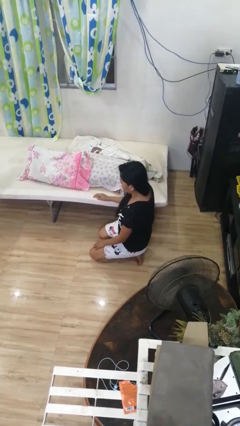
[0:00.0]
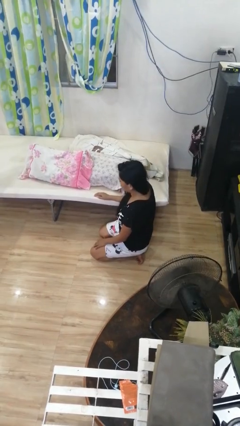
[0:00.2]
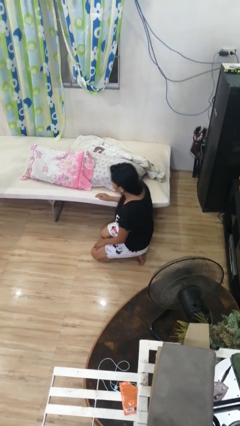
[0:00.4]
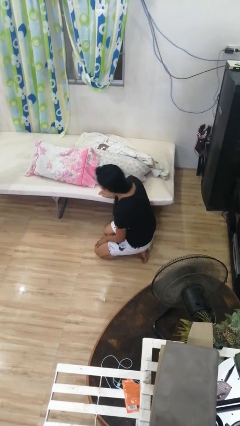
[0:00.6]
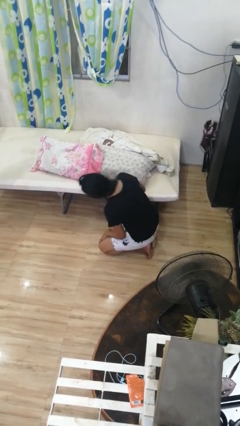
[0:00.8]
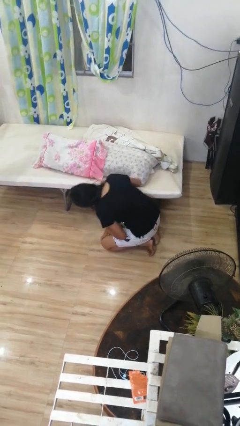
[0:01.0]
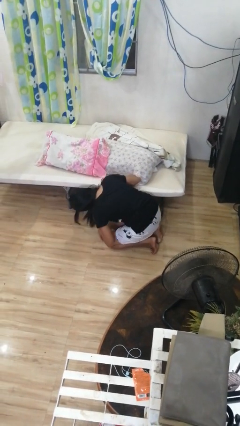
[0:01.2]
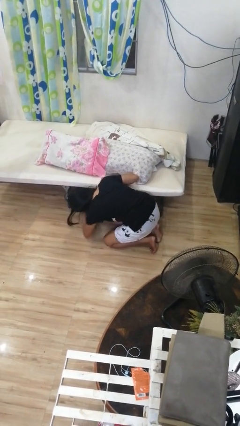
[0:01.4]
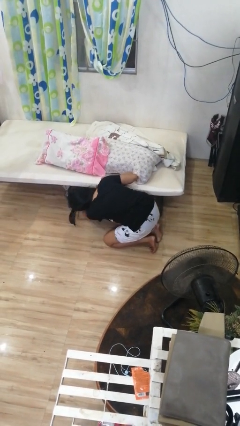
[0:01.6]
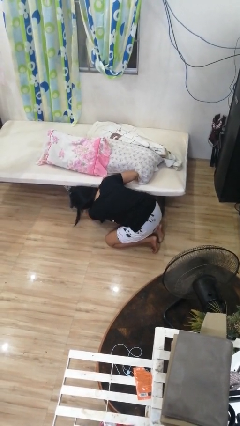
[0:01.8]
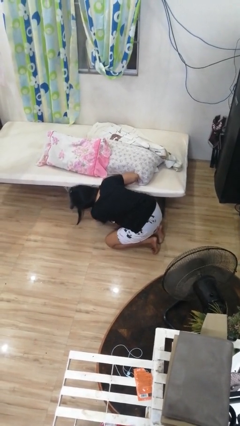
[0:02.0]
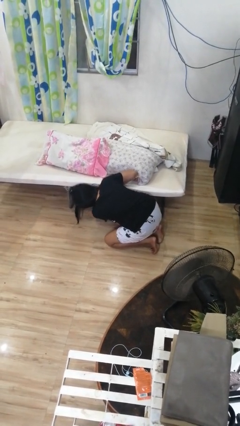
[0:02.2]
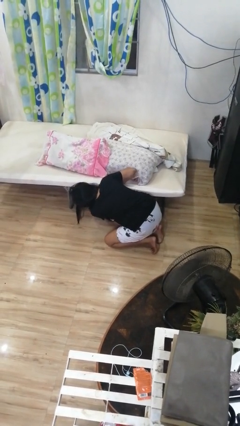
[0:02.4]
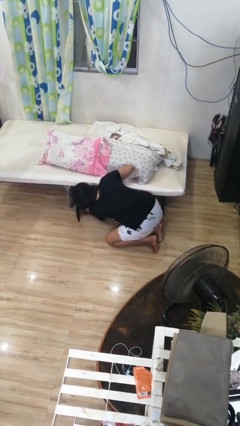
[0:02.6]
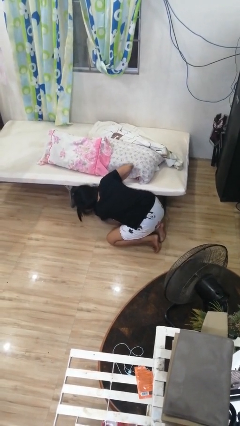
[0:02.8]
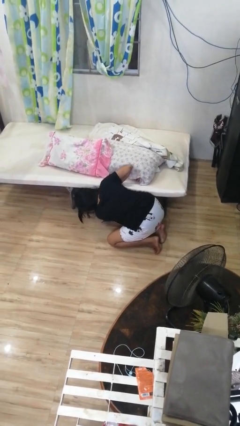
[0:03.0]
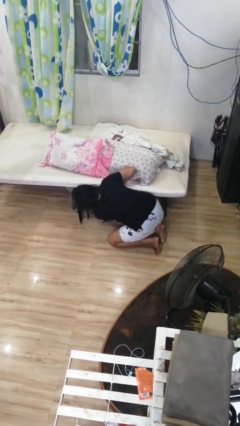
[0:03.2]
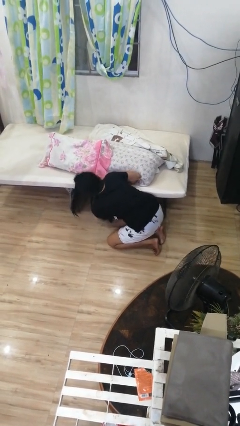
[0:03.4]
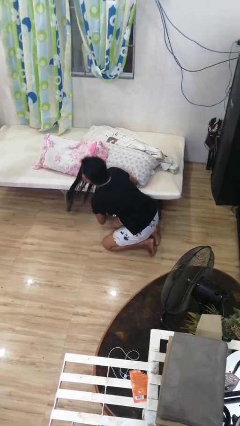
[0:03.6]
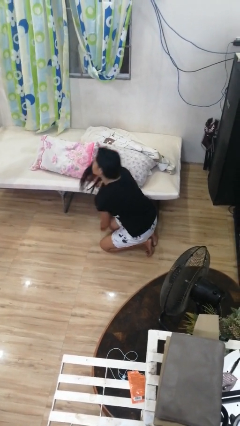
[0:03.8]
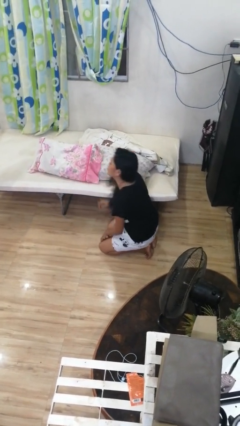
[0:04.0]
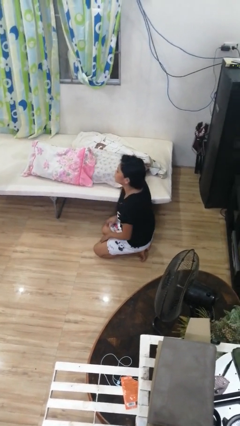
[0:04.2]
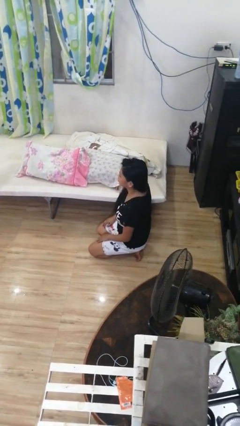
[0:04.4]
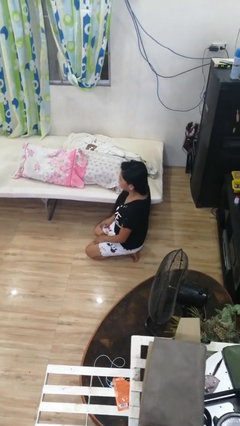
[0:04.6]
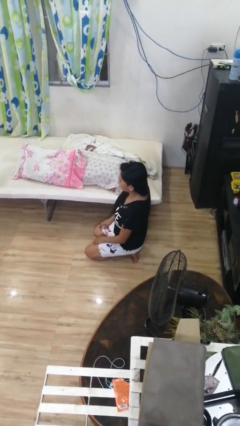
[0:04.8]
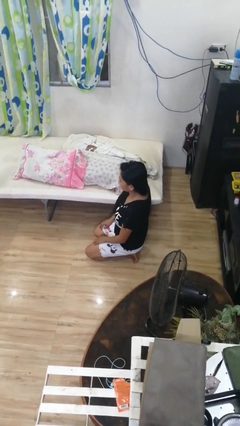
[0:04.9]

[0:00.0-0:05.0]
person searches under bed

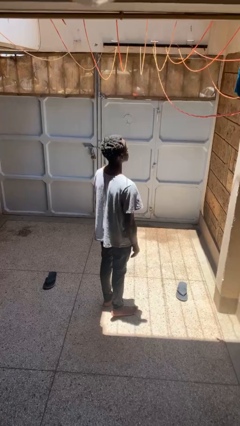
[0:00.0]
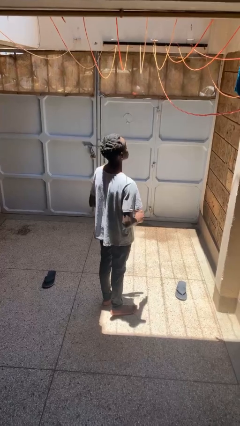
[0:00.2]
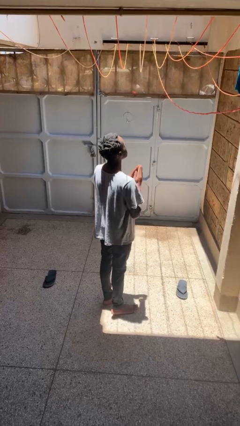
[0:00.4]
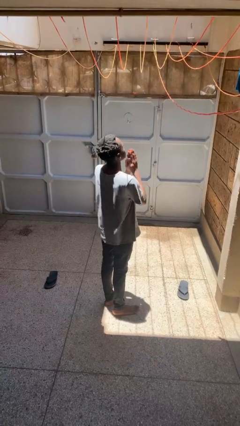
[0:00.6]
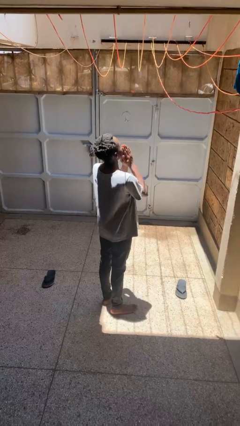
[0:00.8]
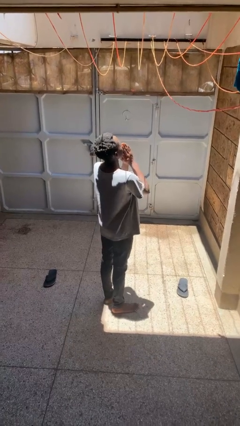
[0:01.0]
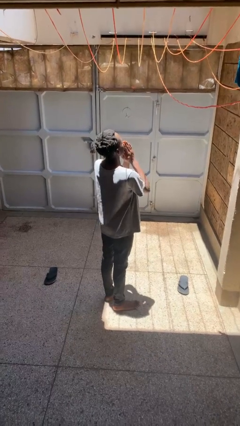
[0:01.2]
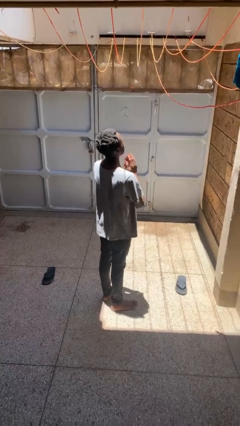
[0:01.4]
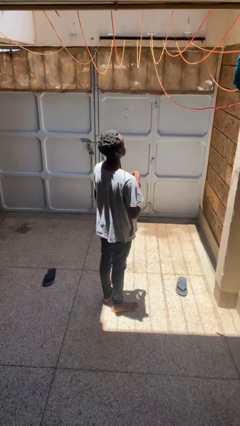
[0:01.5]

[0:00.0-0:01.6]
person prays

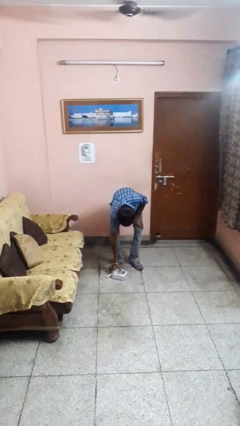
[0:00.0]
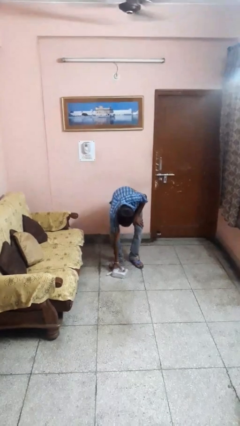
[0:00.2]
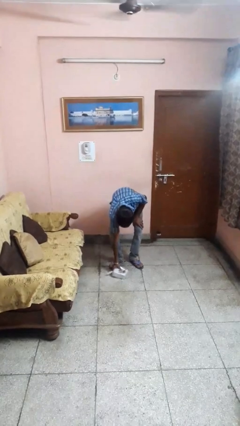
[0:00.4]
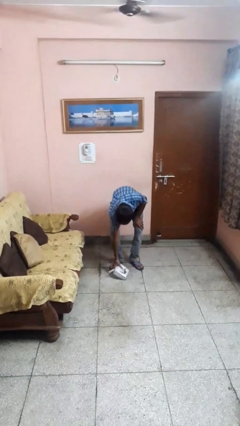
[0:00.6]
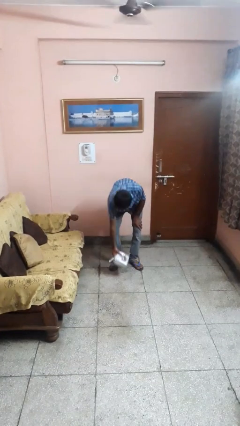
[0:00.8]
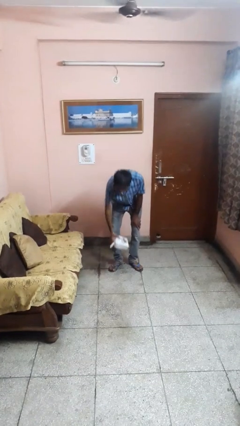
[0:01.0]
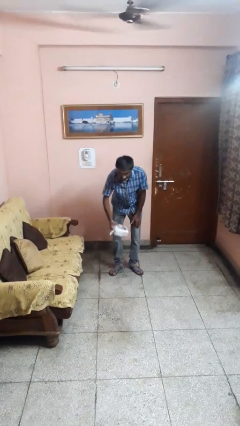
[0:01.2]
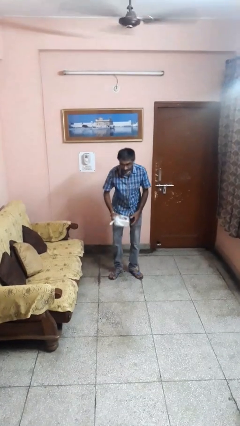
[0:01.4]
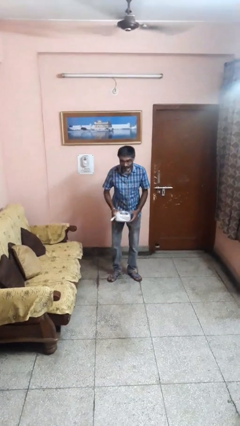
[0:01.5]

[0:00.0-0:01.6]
person picks up object from floor

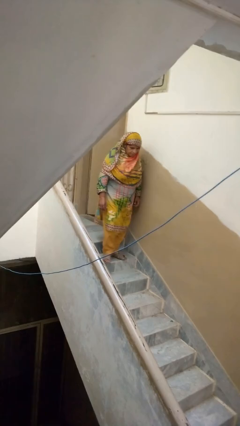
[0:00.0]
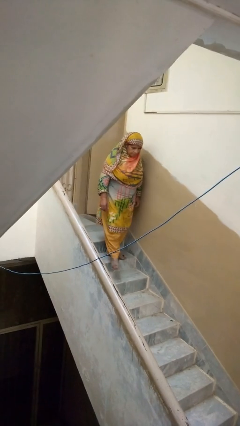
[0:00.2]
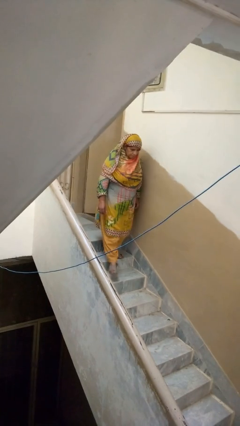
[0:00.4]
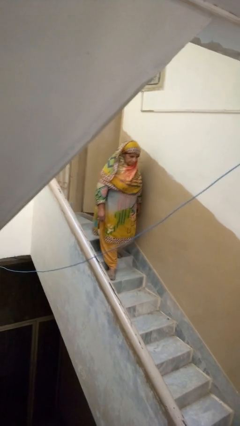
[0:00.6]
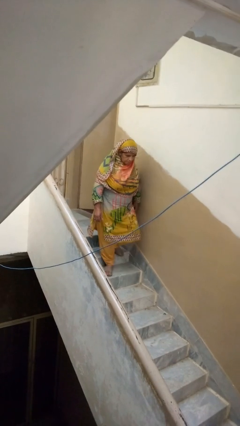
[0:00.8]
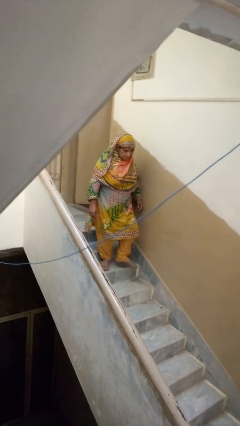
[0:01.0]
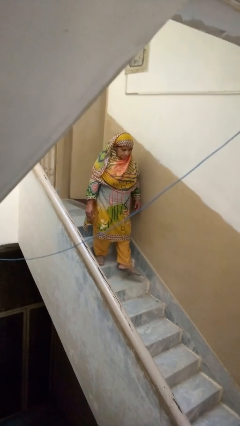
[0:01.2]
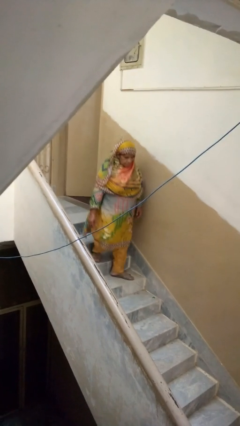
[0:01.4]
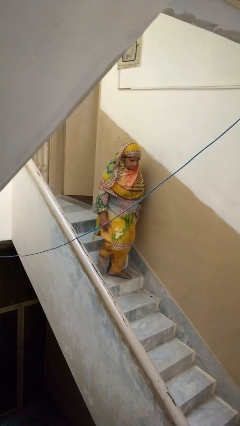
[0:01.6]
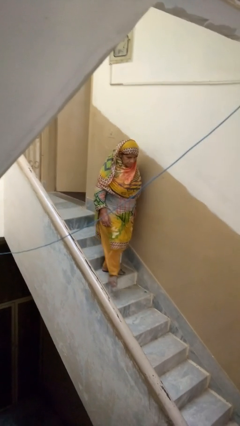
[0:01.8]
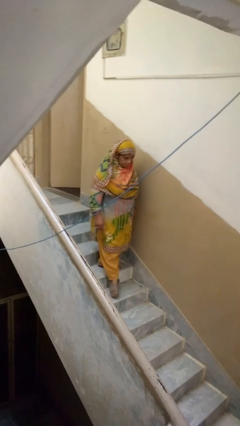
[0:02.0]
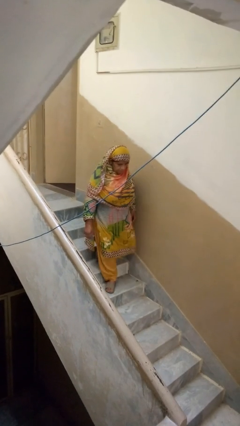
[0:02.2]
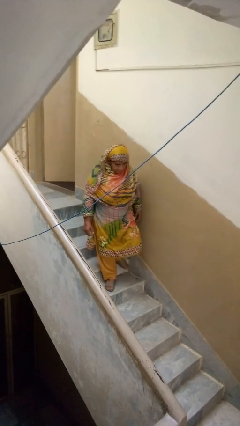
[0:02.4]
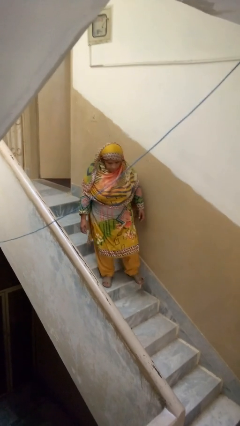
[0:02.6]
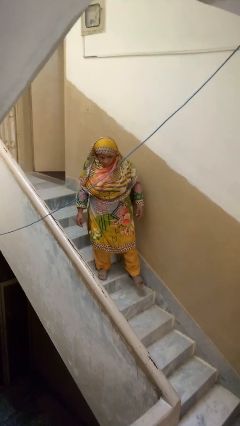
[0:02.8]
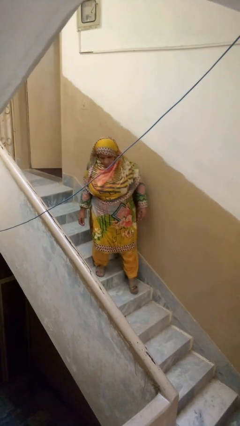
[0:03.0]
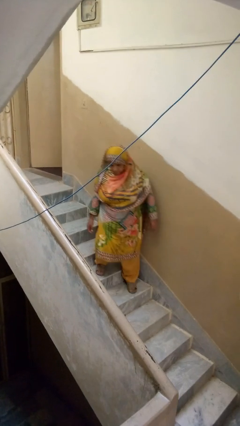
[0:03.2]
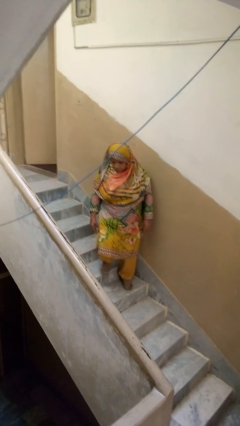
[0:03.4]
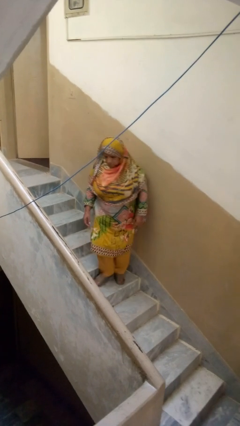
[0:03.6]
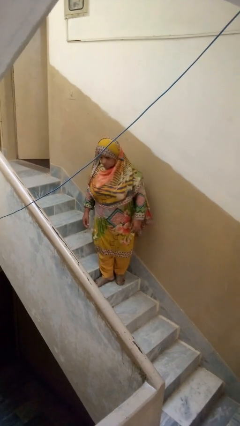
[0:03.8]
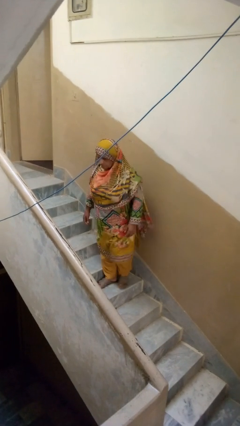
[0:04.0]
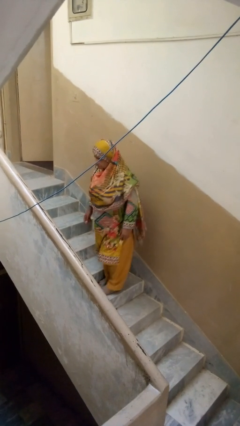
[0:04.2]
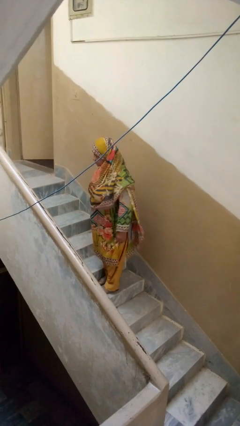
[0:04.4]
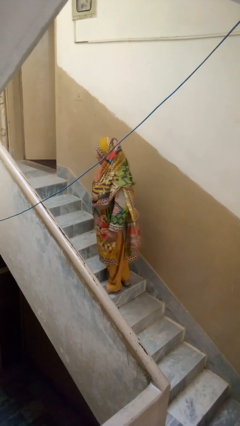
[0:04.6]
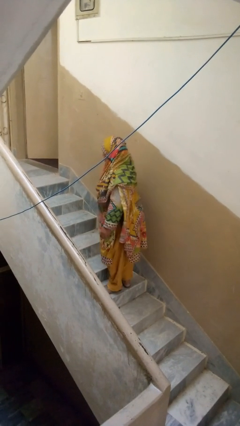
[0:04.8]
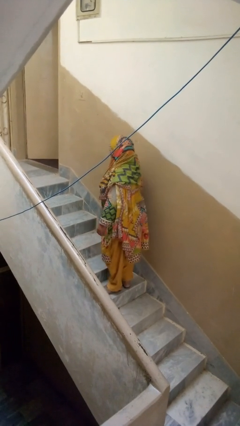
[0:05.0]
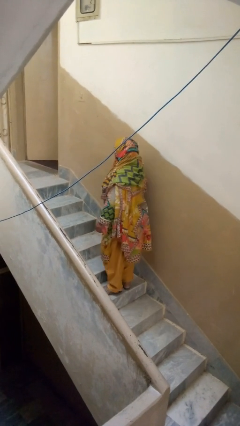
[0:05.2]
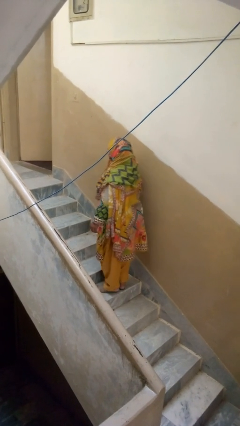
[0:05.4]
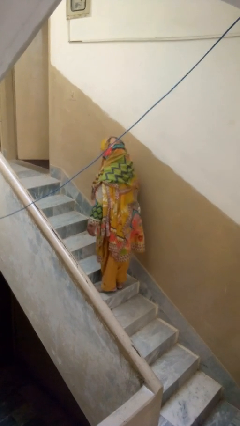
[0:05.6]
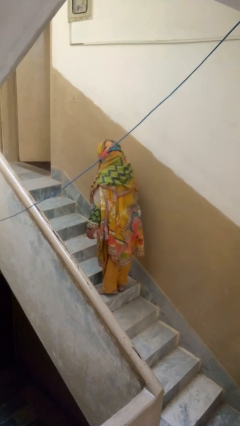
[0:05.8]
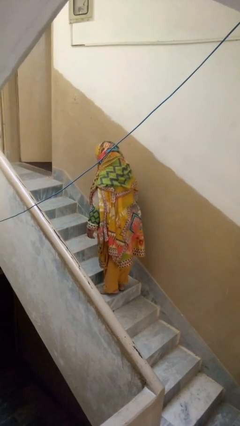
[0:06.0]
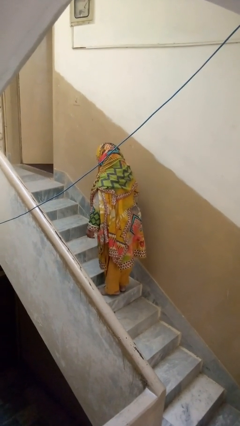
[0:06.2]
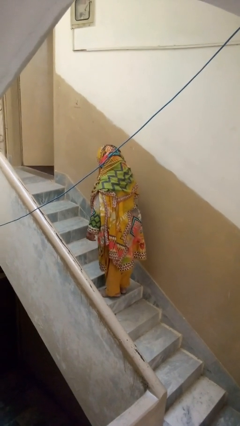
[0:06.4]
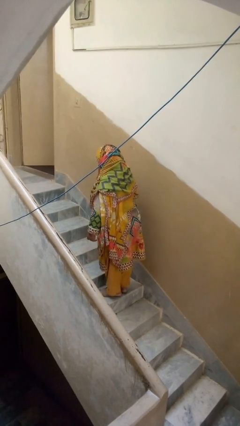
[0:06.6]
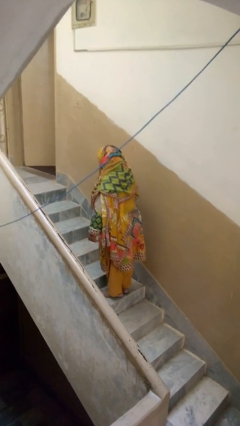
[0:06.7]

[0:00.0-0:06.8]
person climbs down stairs

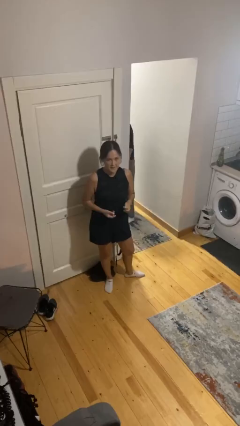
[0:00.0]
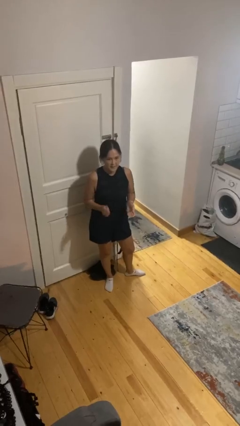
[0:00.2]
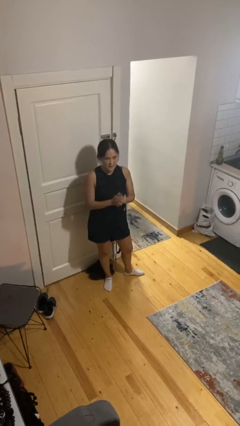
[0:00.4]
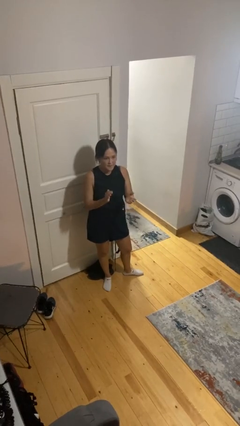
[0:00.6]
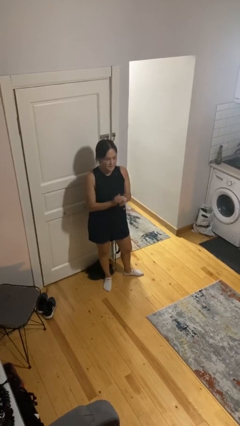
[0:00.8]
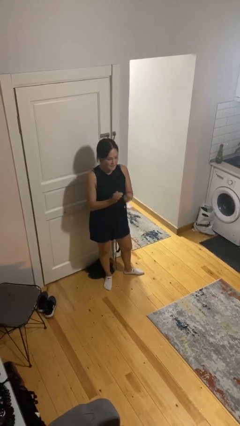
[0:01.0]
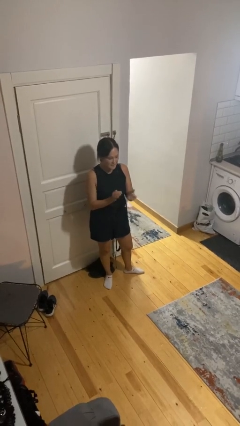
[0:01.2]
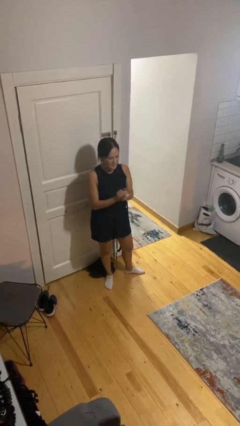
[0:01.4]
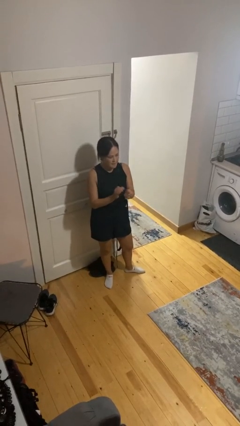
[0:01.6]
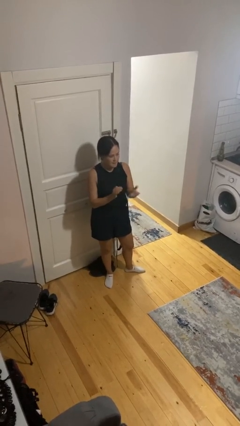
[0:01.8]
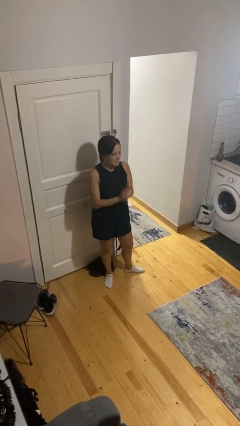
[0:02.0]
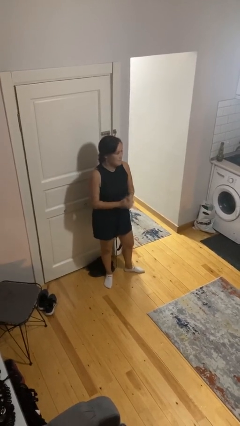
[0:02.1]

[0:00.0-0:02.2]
person claps hands

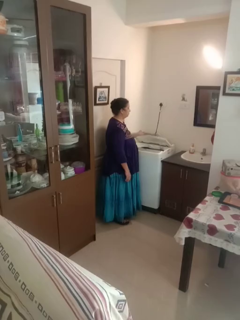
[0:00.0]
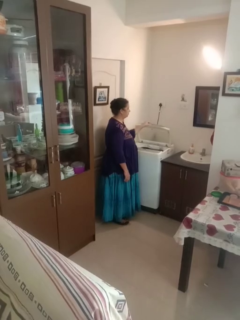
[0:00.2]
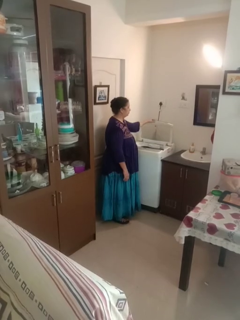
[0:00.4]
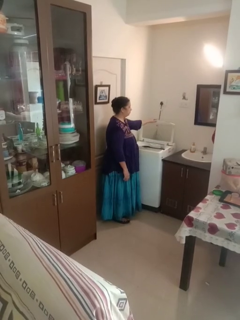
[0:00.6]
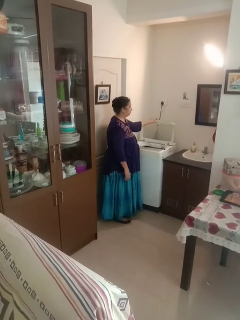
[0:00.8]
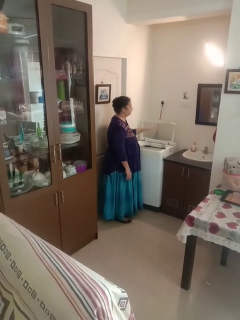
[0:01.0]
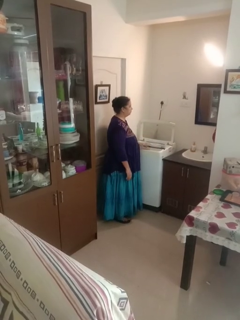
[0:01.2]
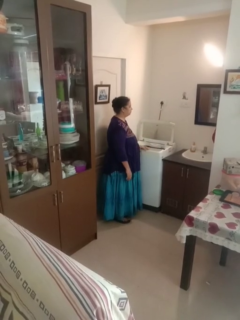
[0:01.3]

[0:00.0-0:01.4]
person opens clothes washer
